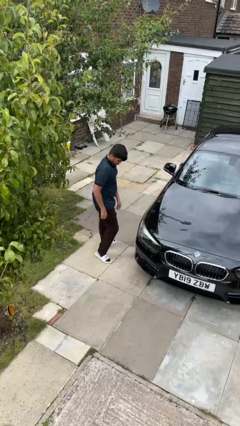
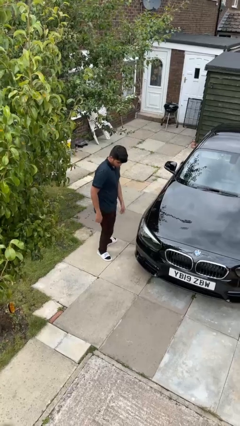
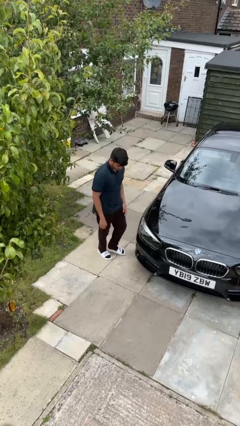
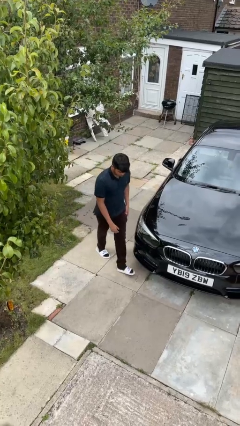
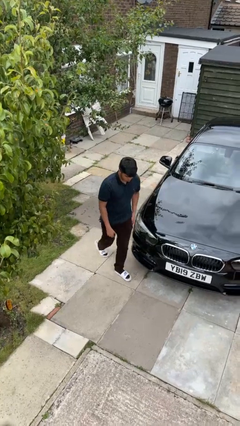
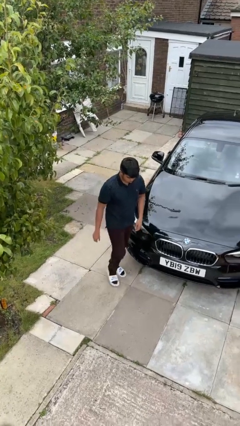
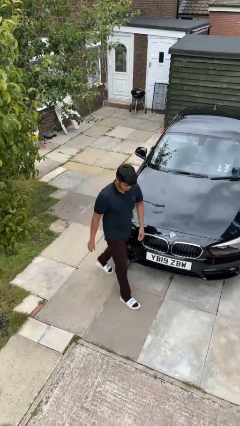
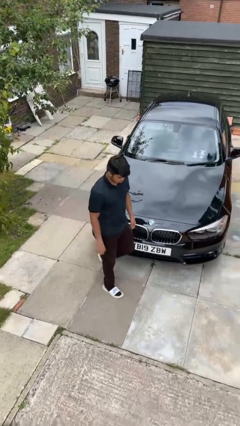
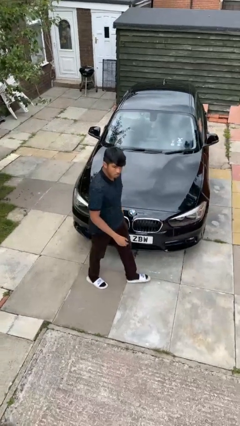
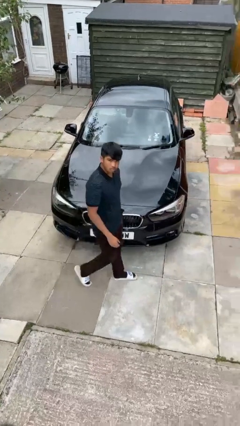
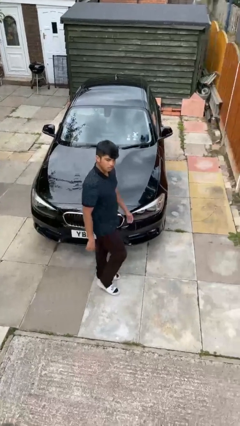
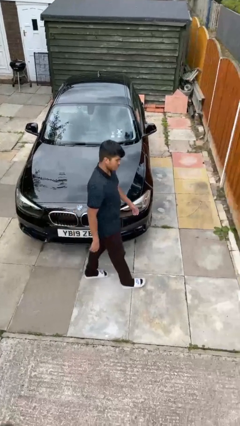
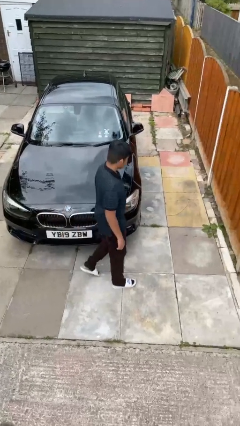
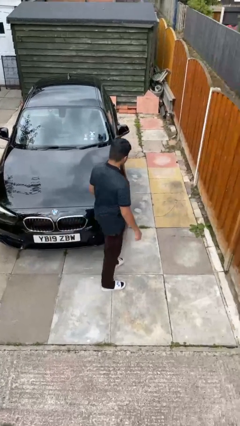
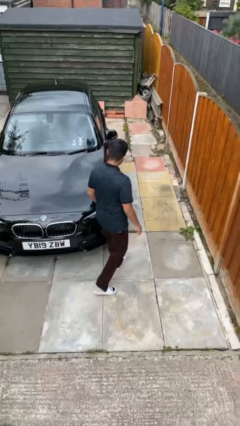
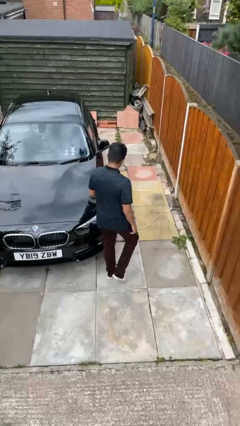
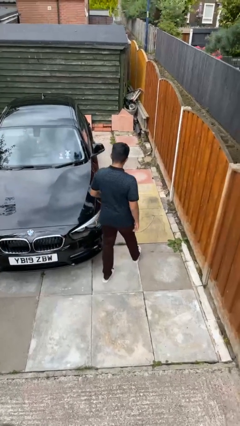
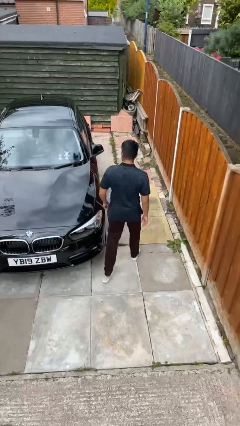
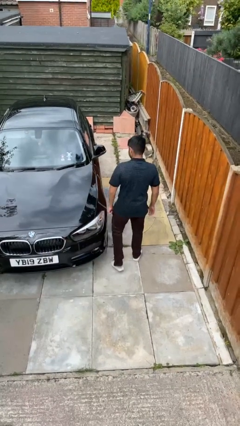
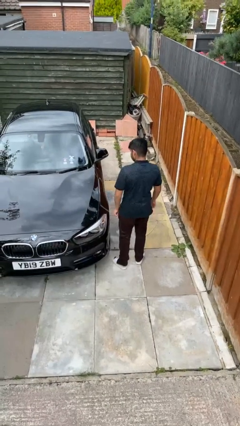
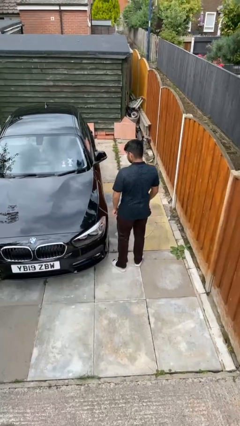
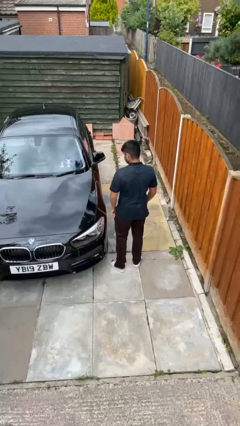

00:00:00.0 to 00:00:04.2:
person walks around car

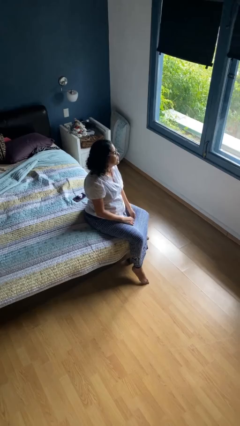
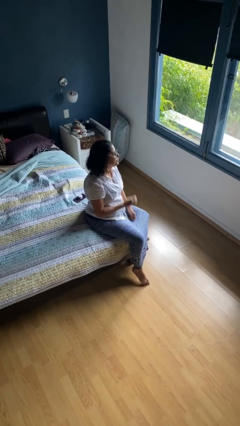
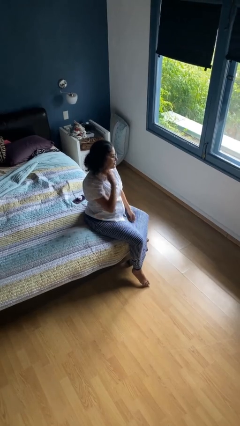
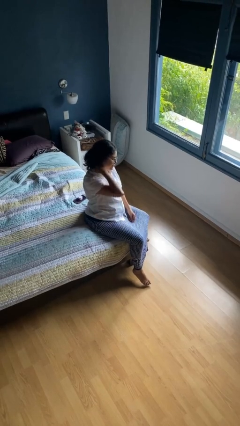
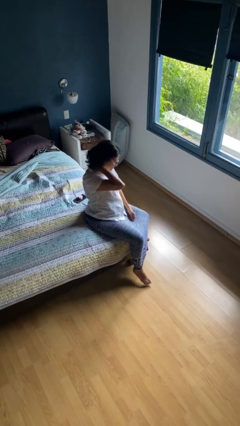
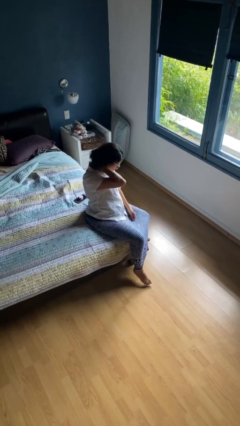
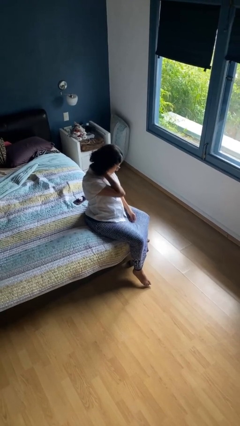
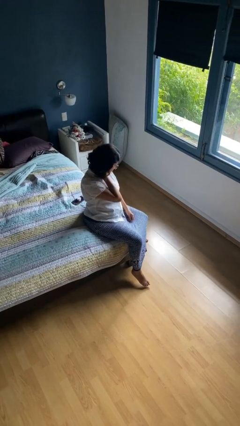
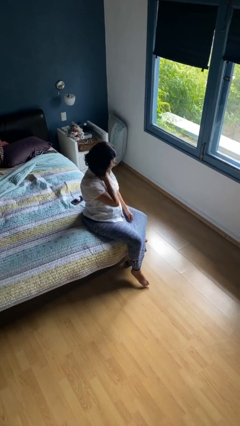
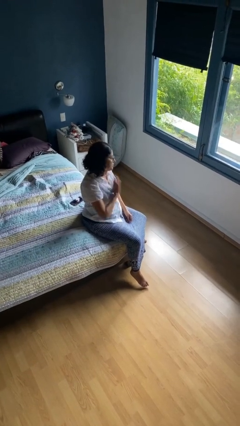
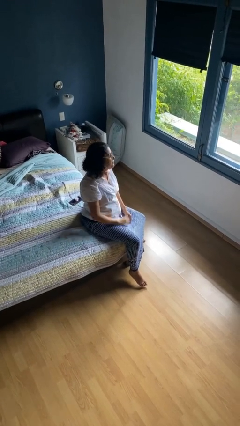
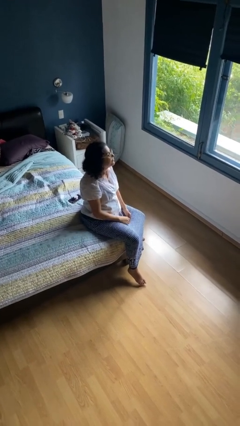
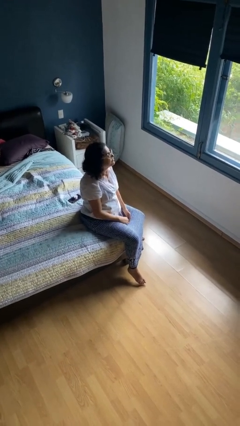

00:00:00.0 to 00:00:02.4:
person rubs neck

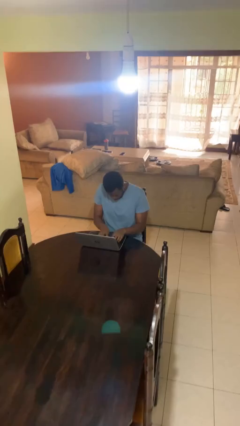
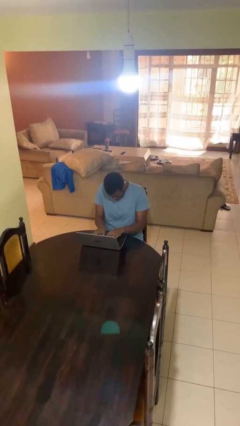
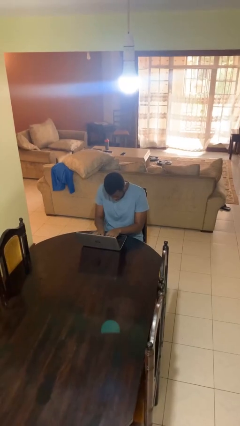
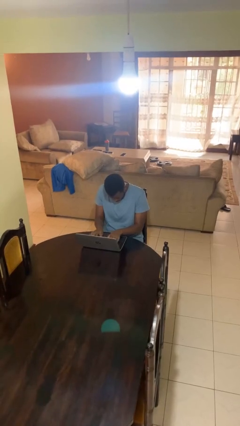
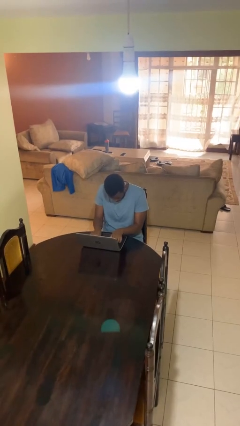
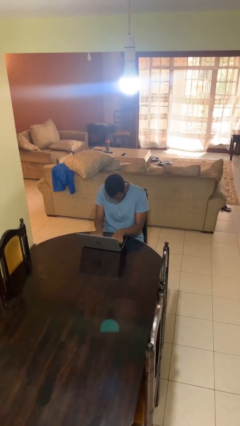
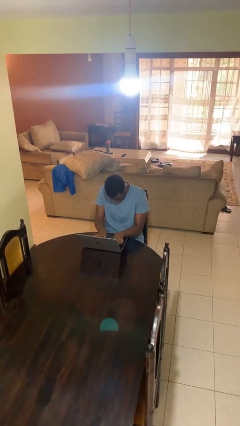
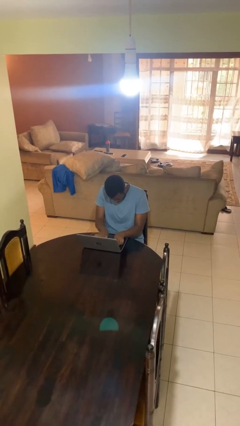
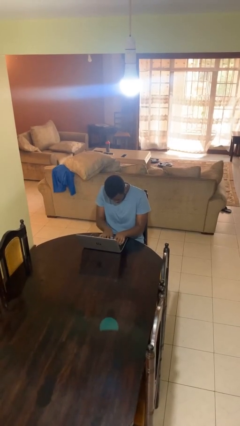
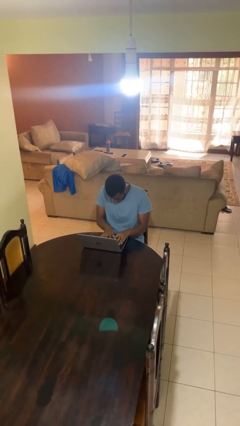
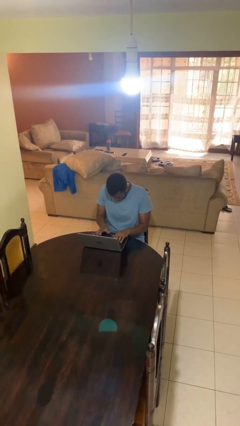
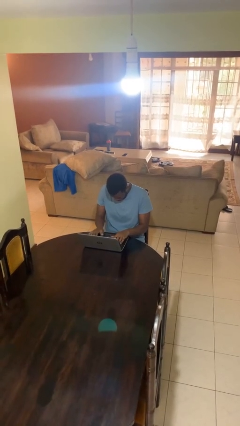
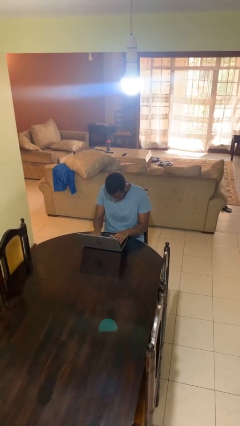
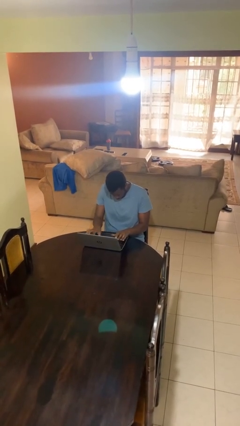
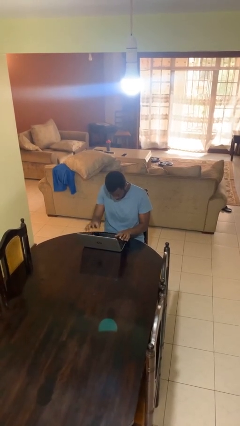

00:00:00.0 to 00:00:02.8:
person interacts with laptop

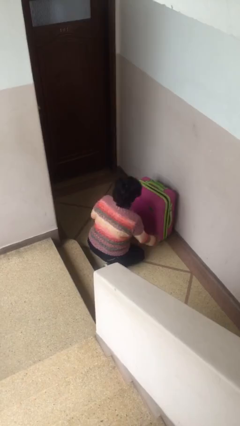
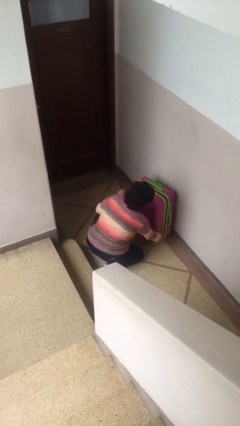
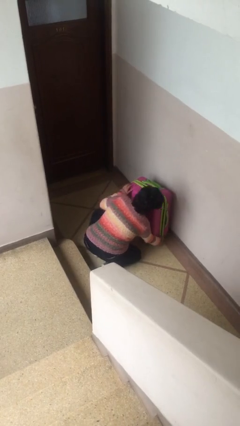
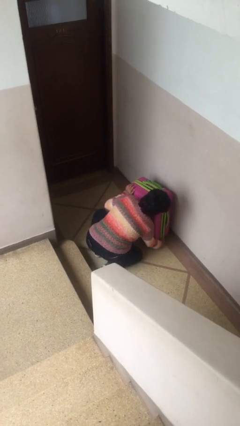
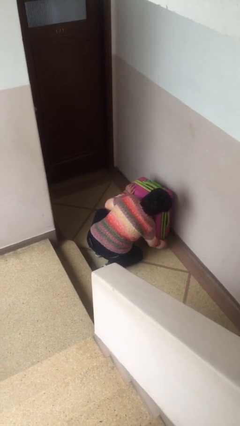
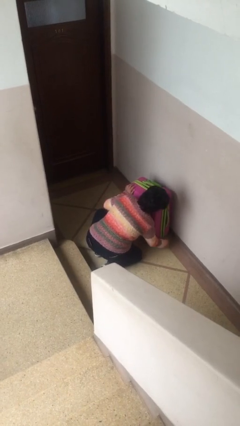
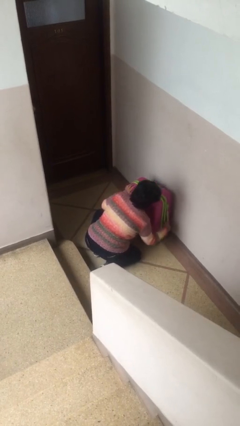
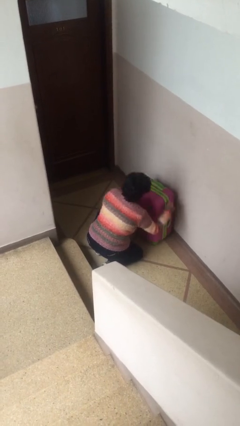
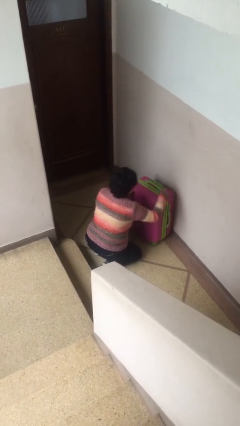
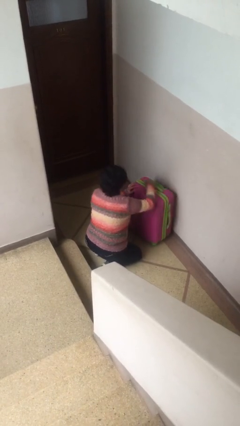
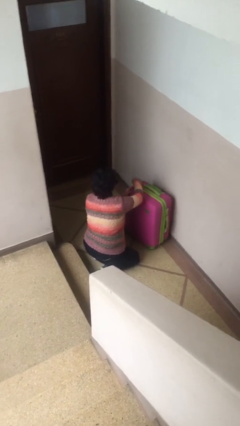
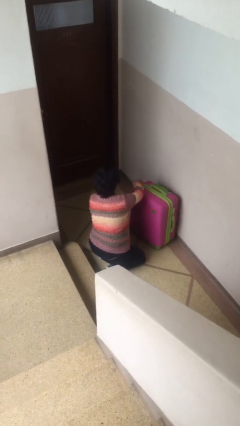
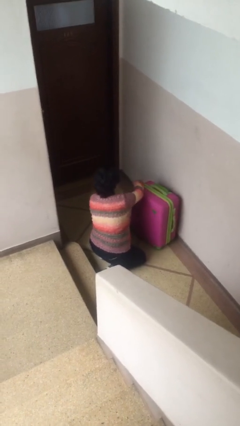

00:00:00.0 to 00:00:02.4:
person closes suitcase

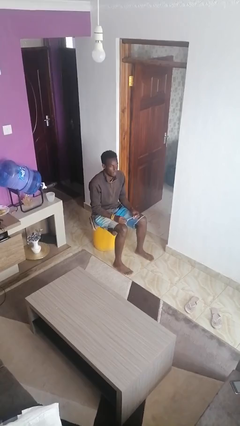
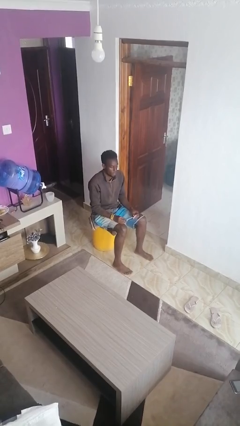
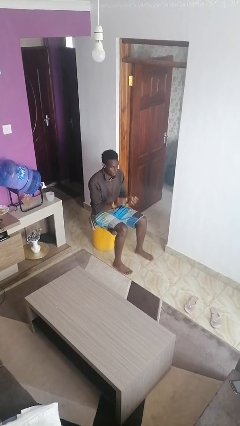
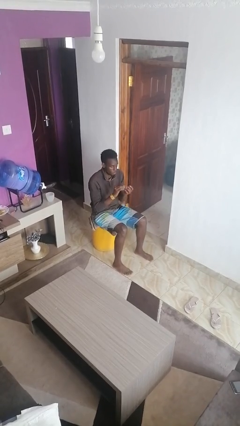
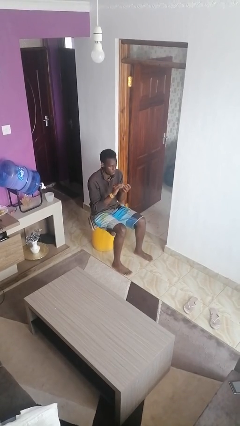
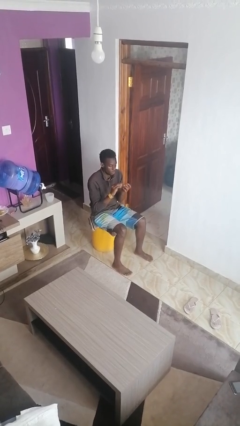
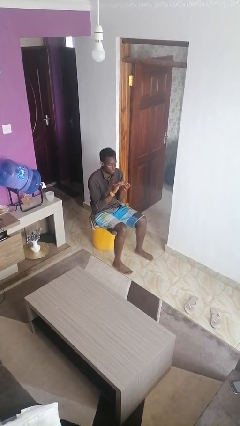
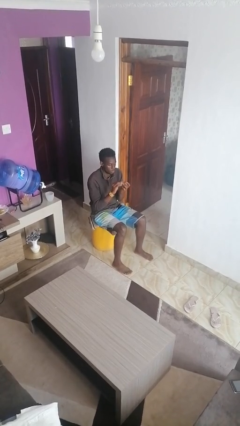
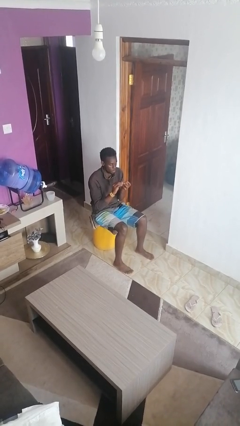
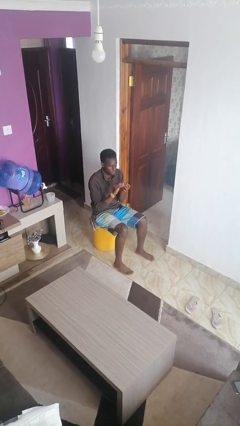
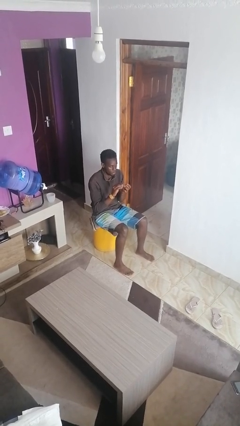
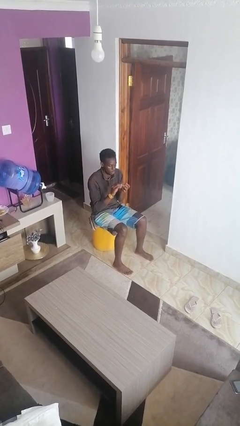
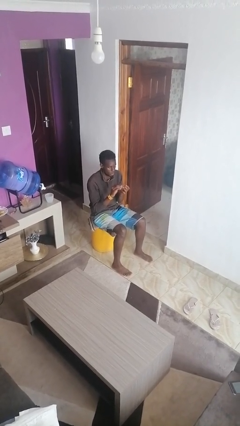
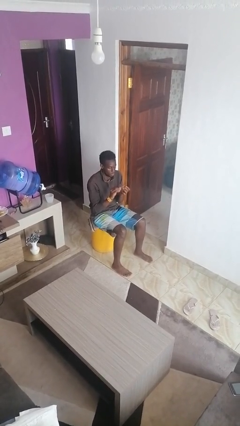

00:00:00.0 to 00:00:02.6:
person files fingernails

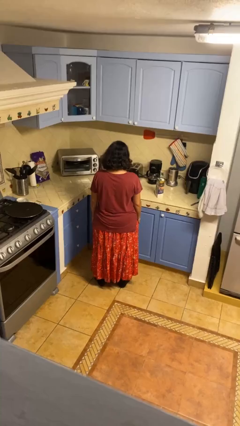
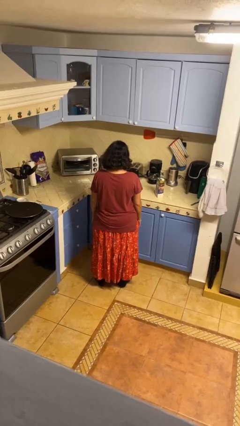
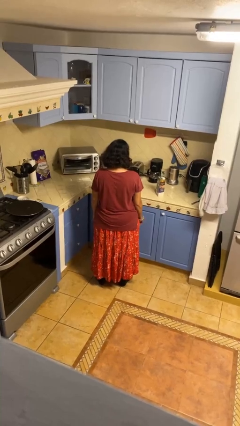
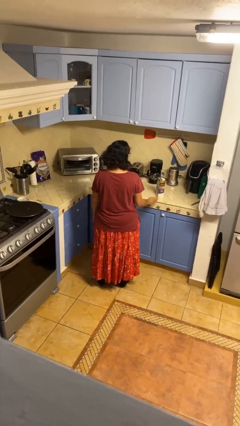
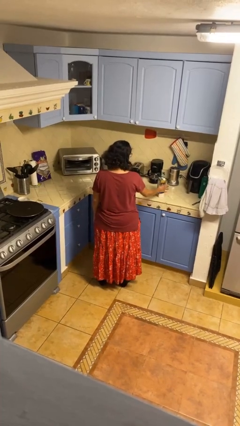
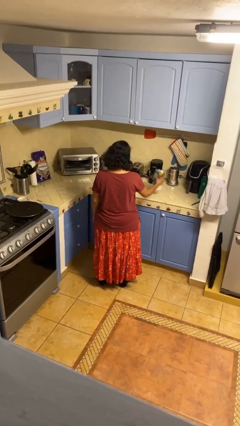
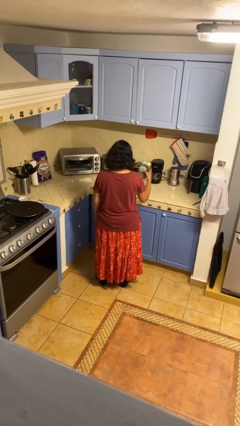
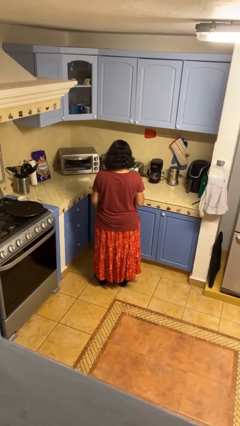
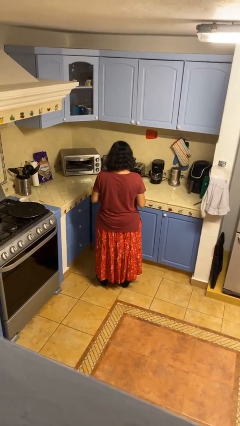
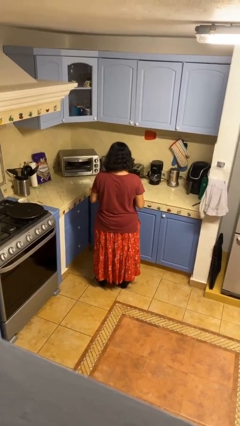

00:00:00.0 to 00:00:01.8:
person picks up object from countertop

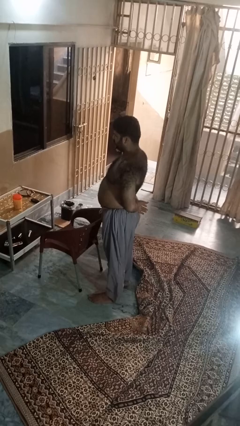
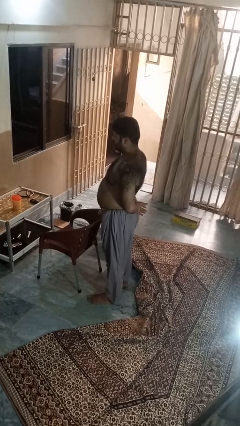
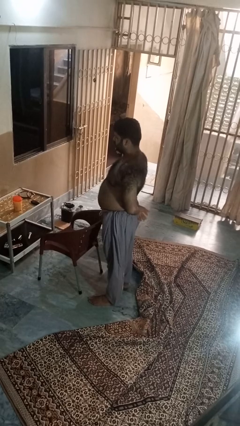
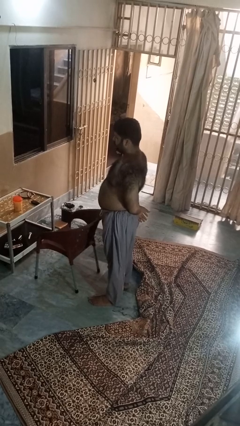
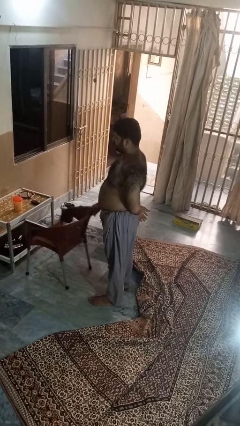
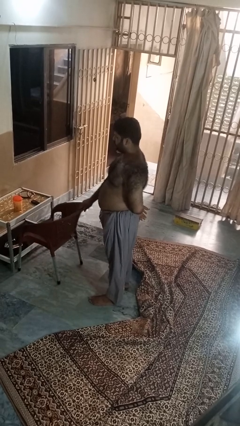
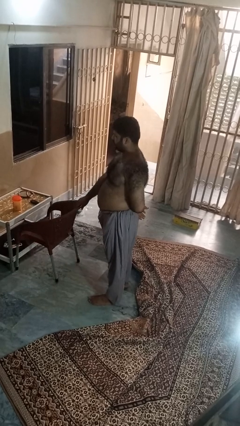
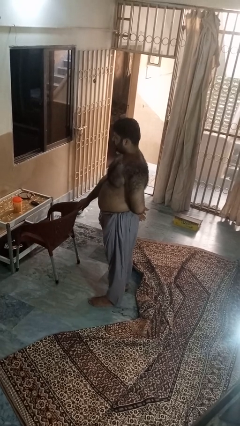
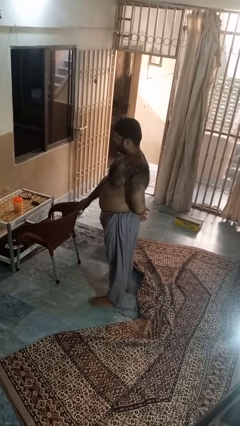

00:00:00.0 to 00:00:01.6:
person pushes in chair
